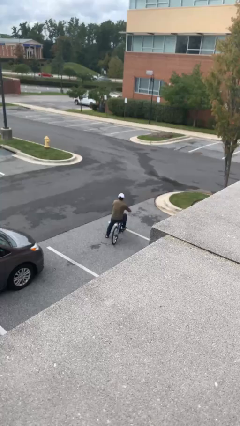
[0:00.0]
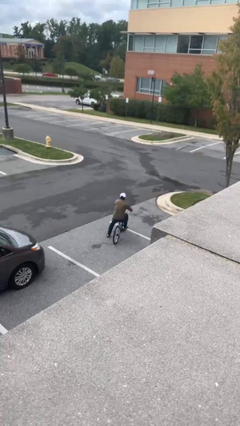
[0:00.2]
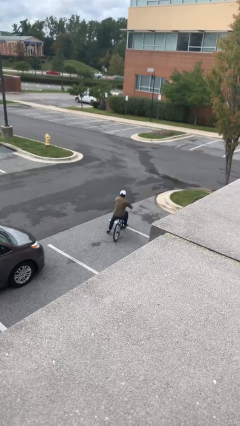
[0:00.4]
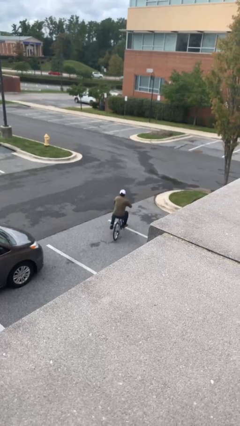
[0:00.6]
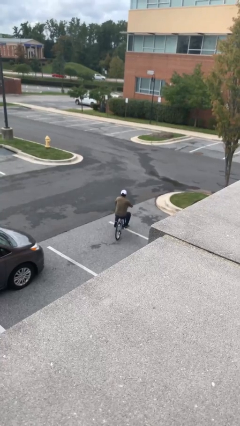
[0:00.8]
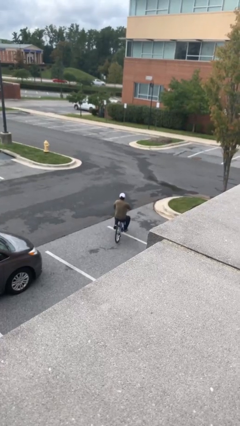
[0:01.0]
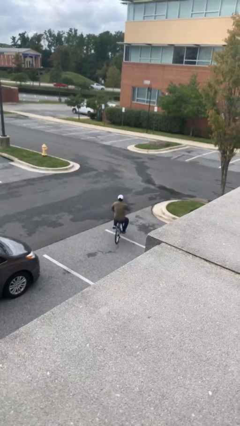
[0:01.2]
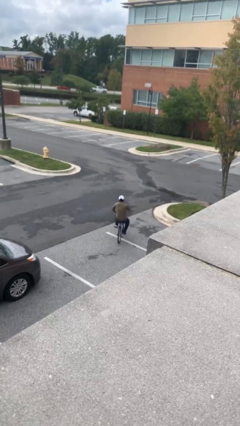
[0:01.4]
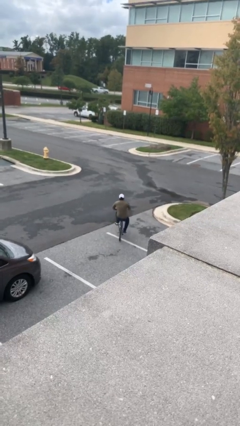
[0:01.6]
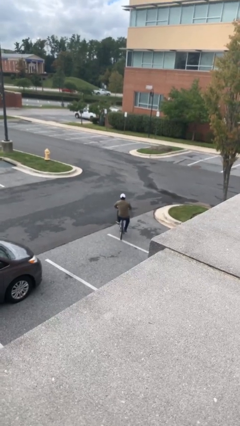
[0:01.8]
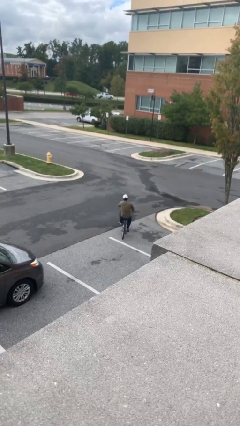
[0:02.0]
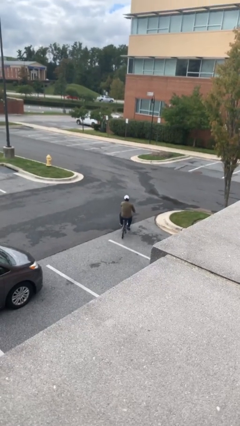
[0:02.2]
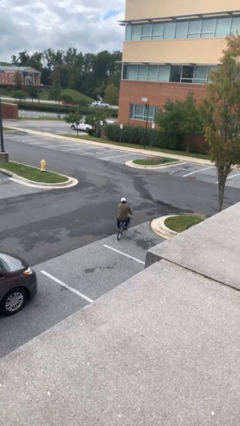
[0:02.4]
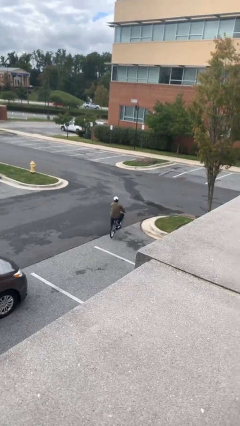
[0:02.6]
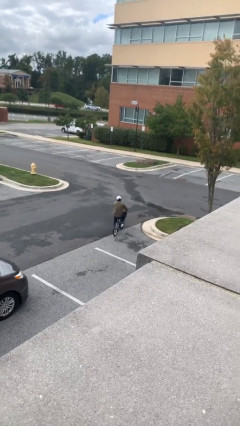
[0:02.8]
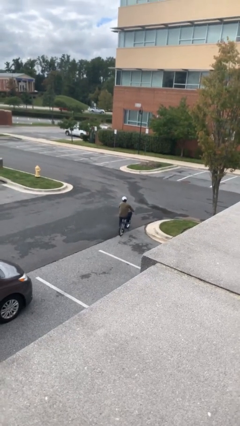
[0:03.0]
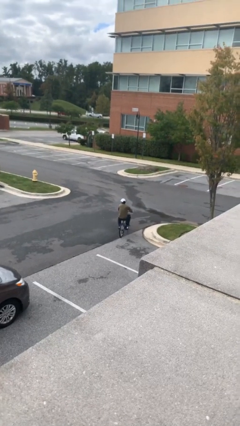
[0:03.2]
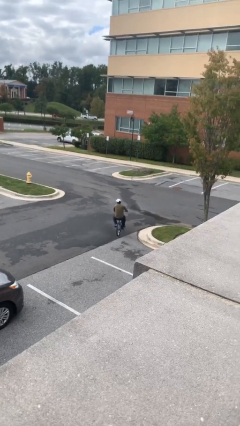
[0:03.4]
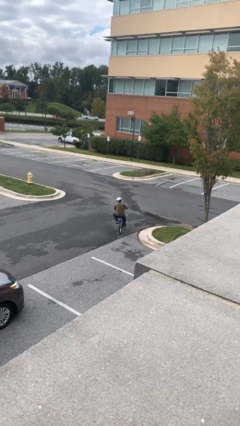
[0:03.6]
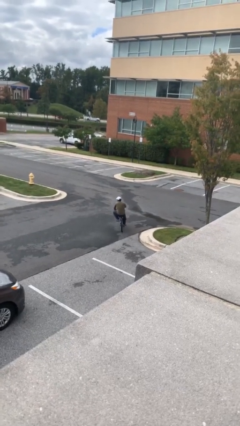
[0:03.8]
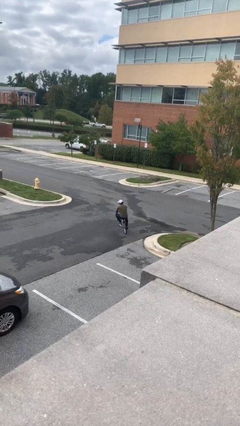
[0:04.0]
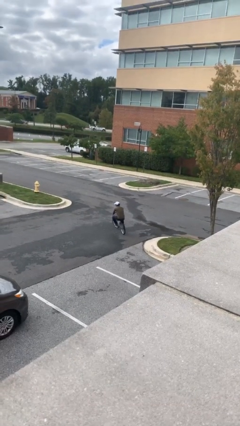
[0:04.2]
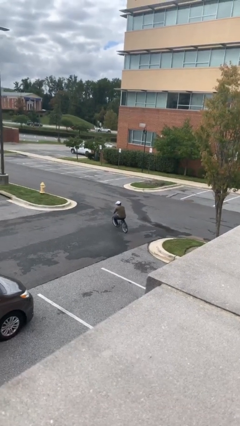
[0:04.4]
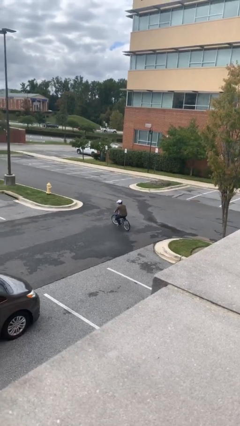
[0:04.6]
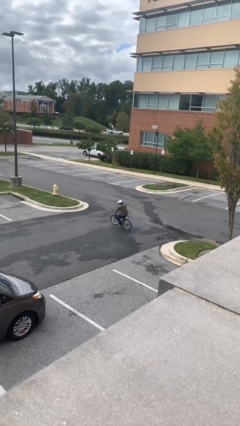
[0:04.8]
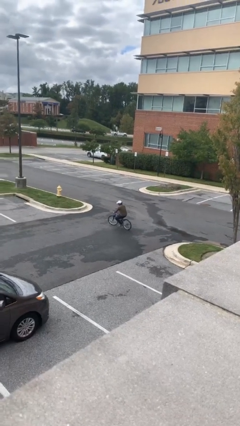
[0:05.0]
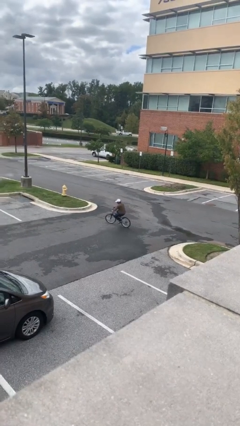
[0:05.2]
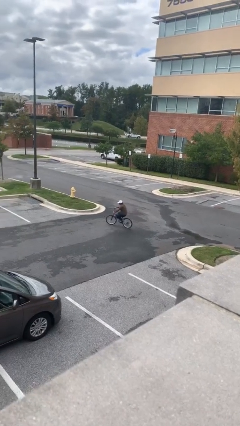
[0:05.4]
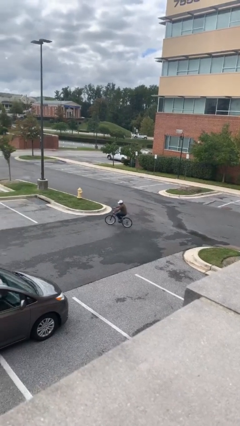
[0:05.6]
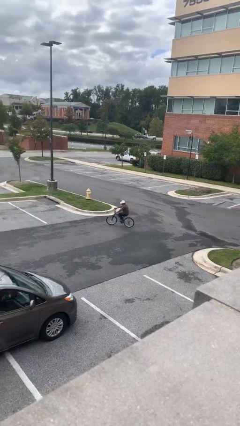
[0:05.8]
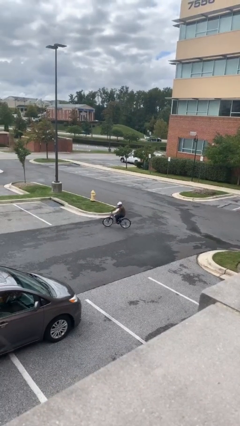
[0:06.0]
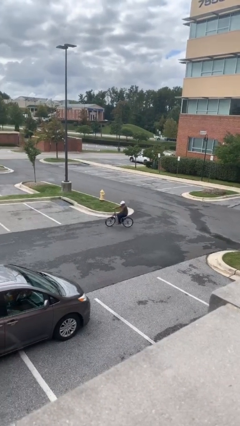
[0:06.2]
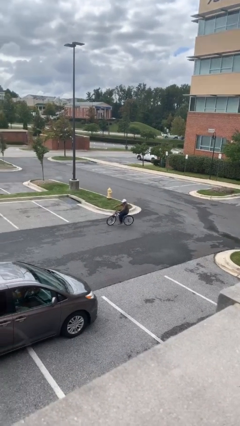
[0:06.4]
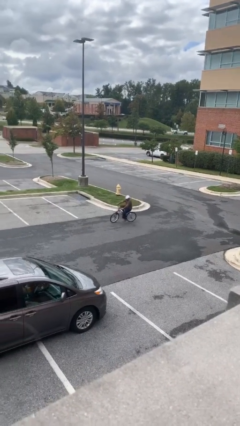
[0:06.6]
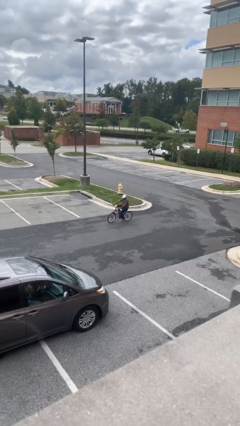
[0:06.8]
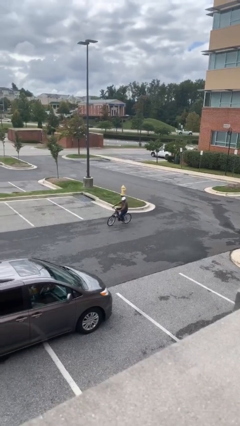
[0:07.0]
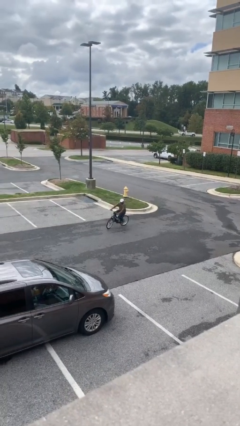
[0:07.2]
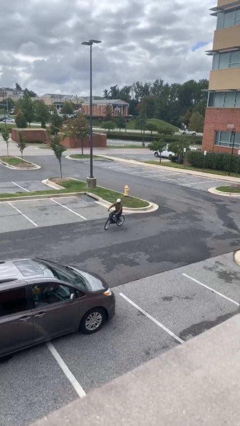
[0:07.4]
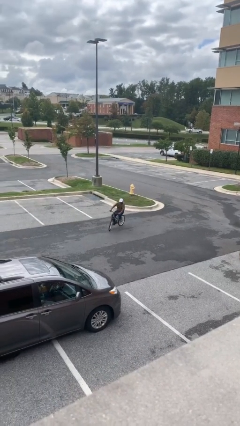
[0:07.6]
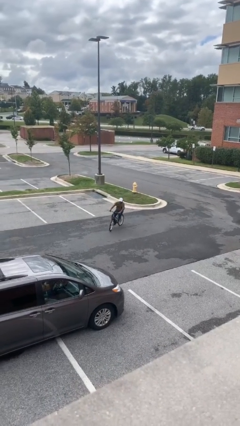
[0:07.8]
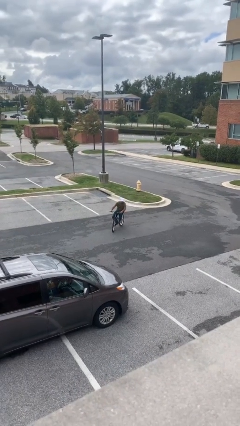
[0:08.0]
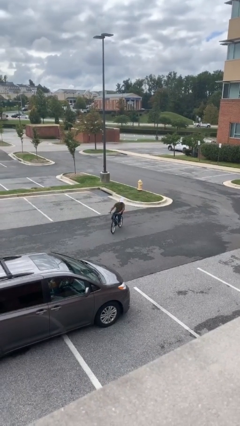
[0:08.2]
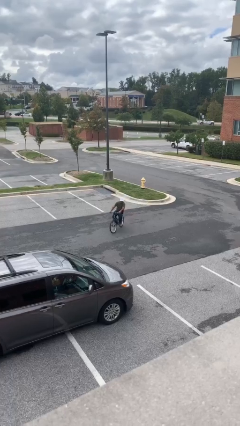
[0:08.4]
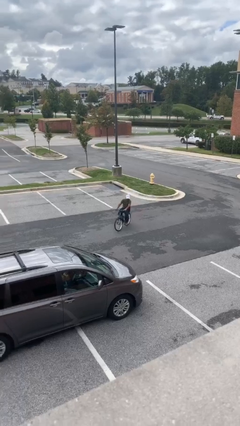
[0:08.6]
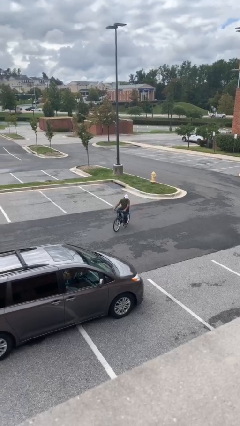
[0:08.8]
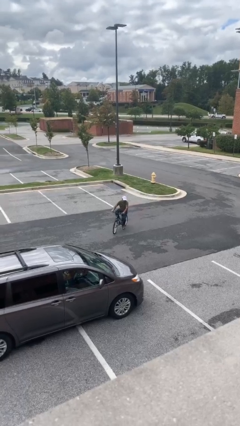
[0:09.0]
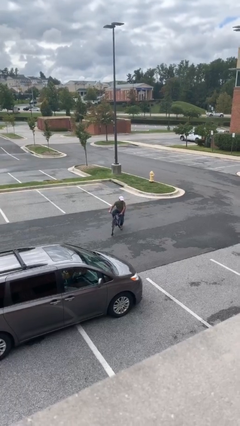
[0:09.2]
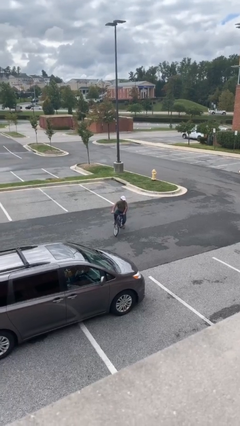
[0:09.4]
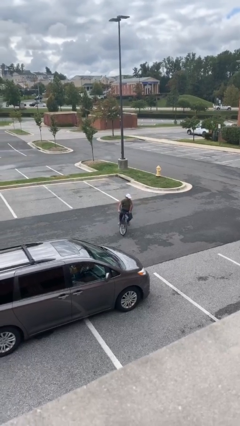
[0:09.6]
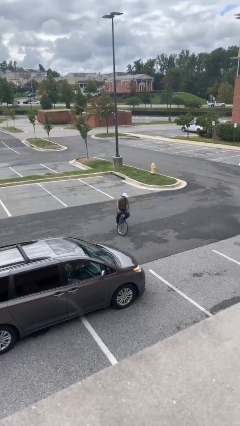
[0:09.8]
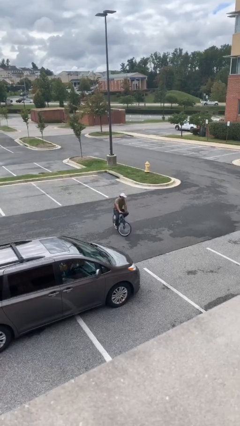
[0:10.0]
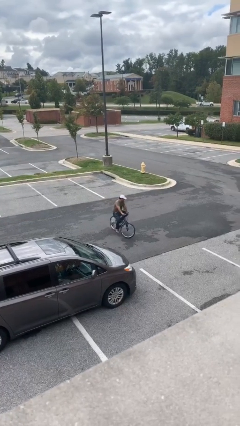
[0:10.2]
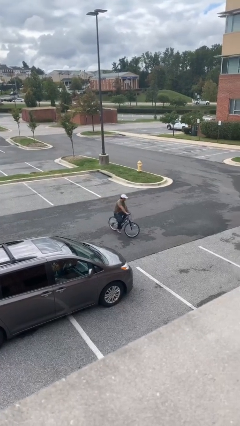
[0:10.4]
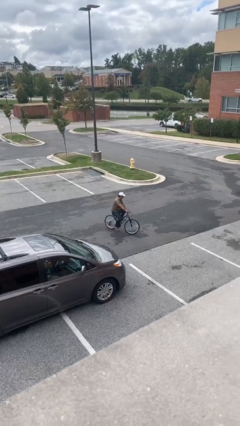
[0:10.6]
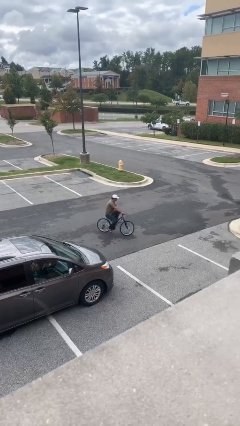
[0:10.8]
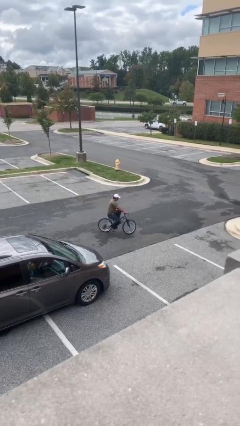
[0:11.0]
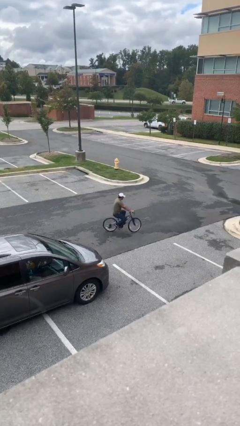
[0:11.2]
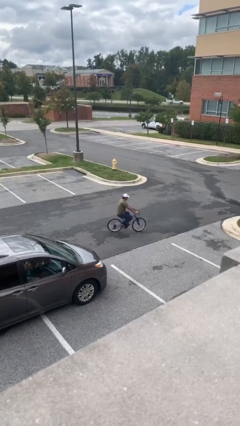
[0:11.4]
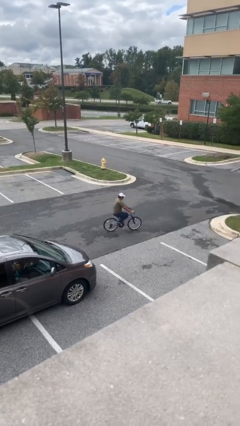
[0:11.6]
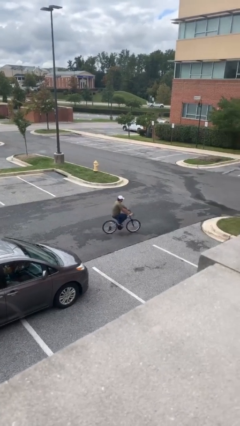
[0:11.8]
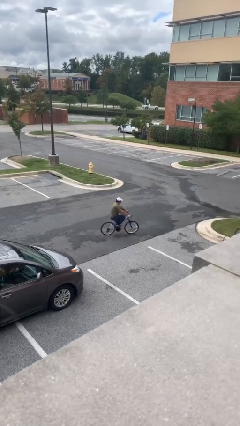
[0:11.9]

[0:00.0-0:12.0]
person rides bicycle

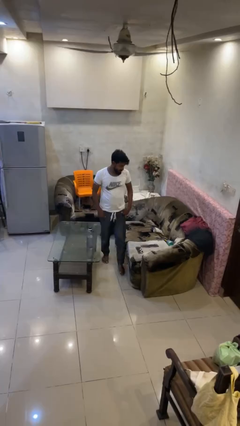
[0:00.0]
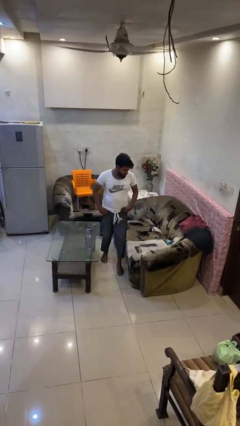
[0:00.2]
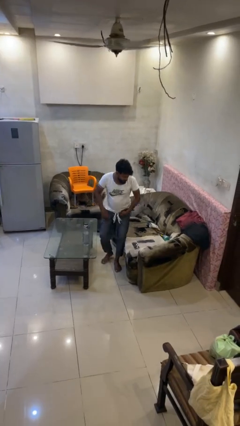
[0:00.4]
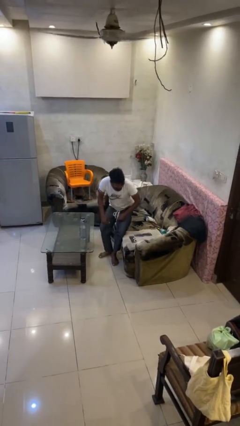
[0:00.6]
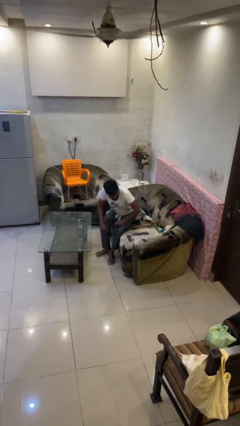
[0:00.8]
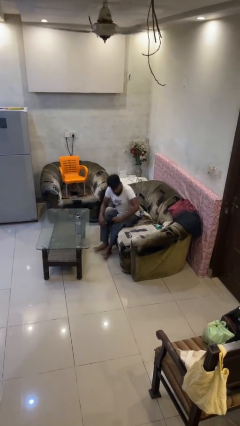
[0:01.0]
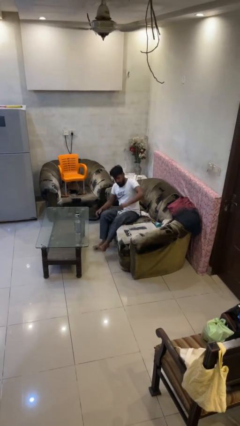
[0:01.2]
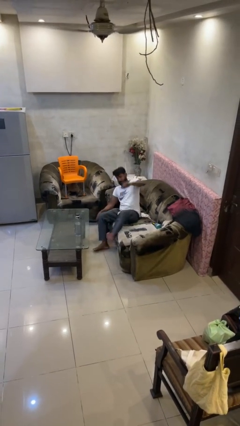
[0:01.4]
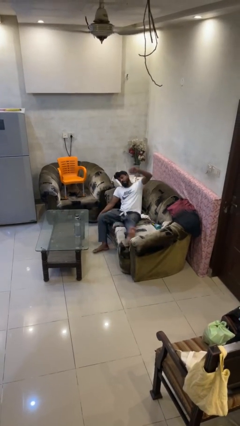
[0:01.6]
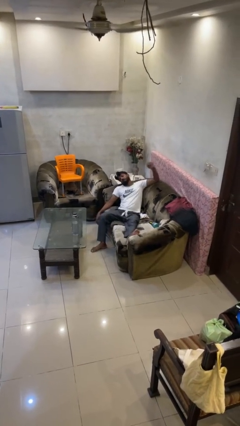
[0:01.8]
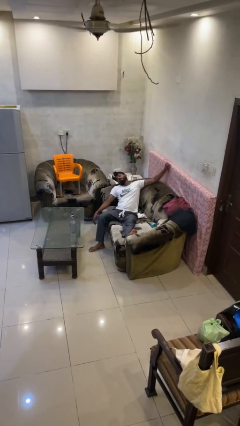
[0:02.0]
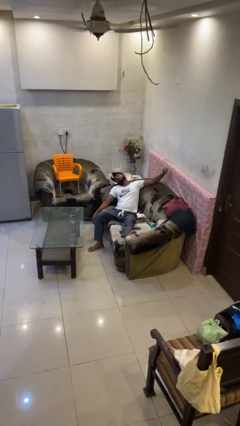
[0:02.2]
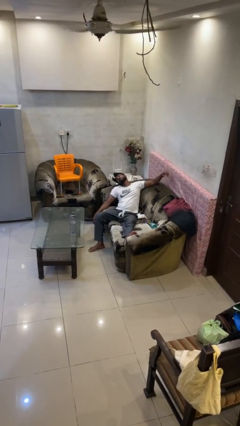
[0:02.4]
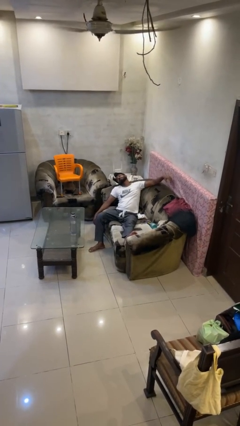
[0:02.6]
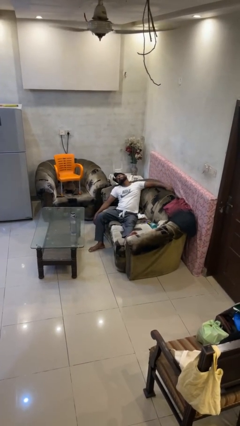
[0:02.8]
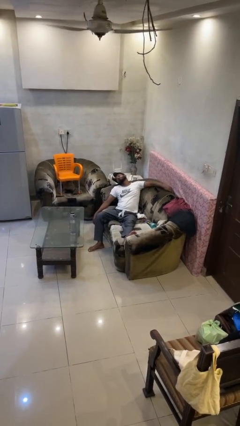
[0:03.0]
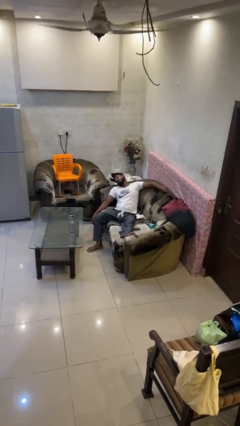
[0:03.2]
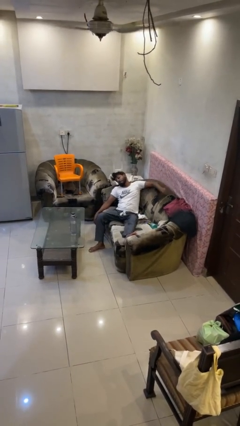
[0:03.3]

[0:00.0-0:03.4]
person lies down on couch

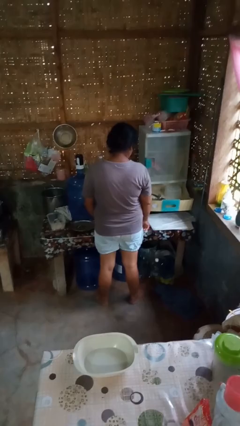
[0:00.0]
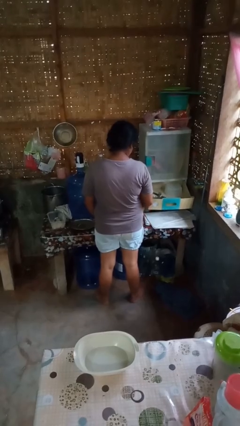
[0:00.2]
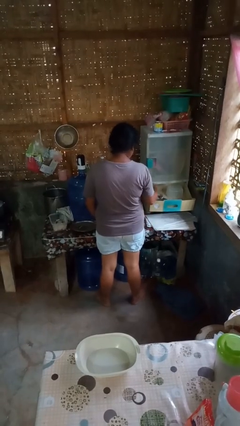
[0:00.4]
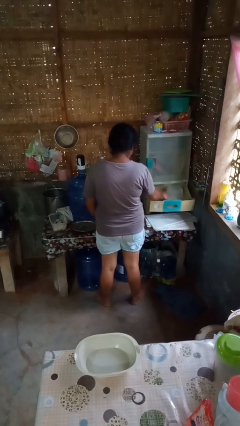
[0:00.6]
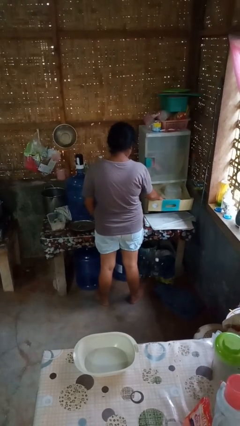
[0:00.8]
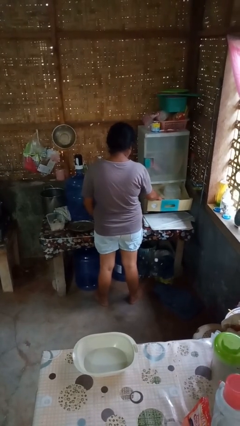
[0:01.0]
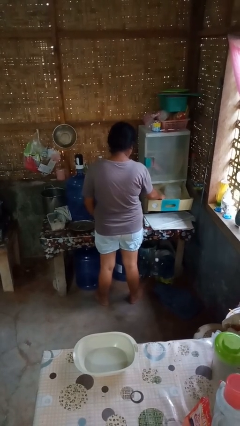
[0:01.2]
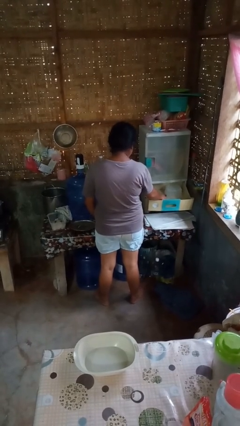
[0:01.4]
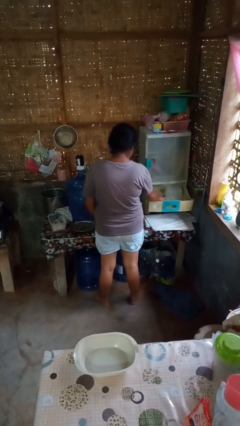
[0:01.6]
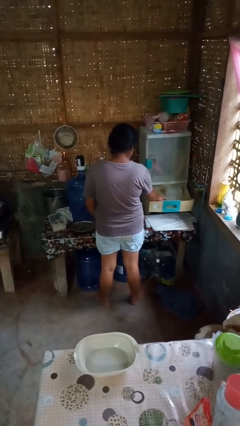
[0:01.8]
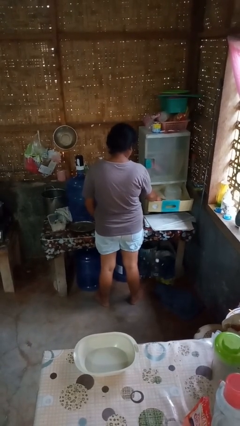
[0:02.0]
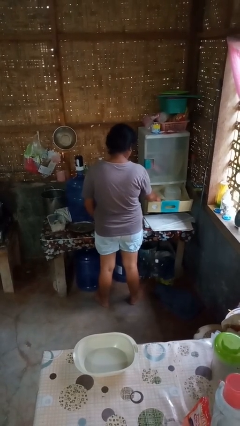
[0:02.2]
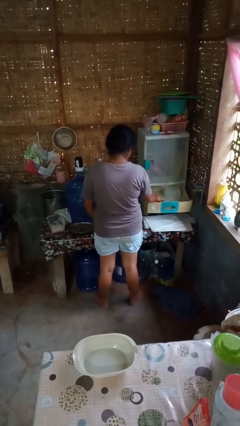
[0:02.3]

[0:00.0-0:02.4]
person searches in kitchen drawer
